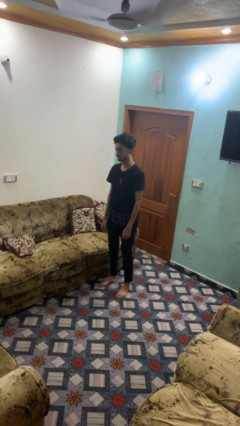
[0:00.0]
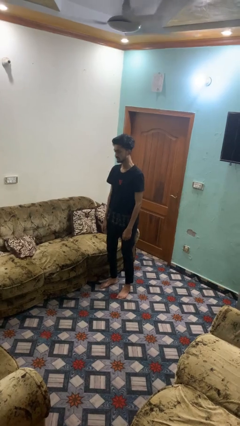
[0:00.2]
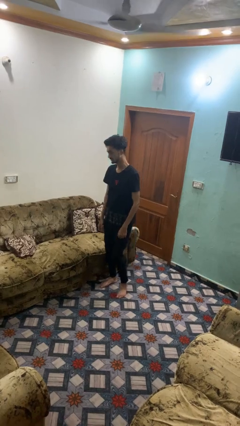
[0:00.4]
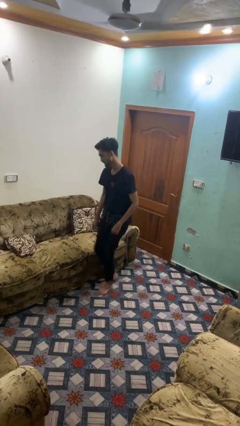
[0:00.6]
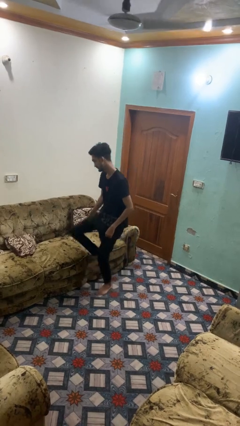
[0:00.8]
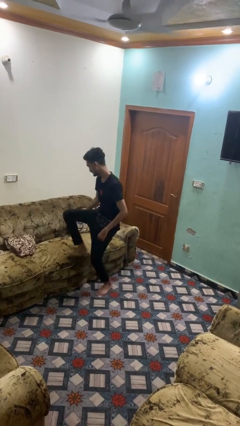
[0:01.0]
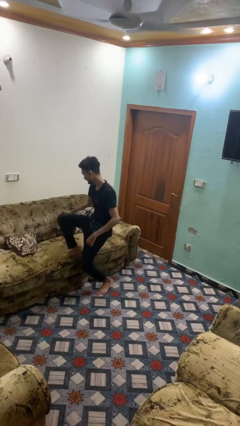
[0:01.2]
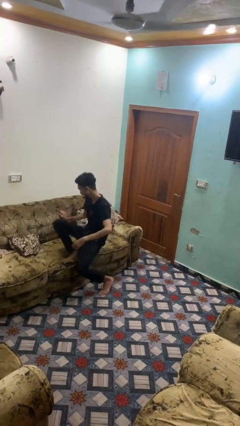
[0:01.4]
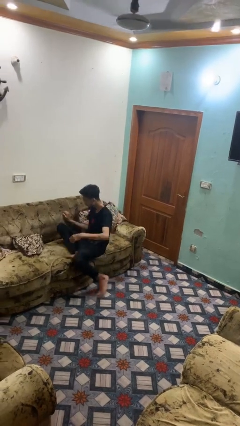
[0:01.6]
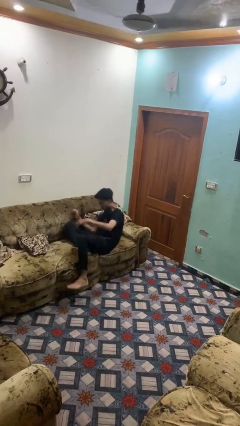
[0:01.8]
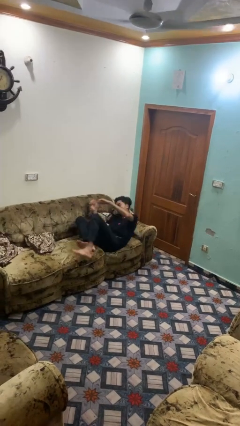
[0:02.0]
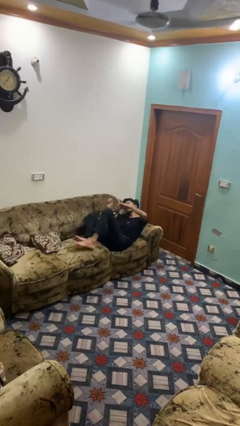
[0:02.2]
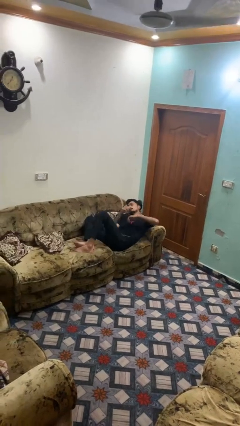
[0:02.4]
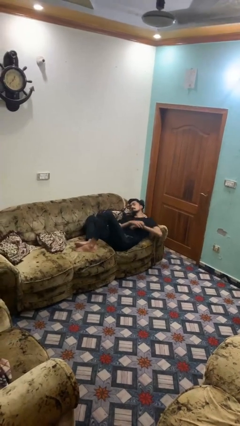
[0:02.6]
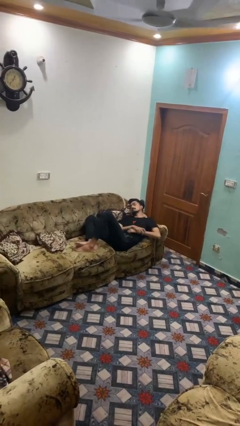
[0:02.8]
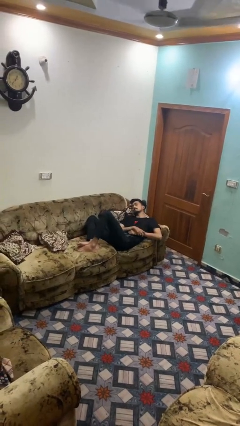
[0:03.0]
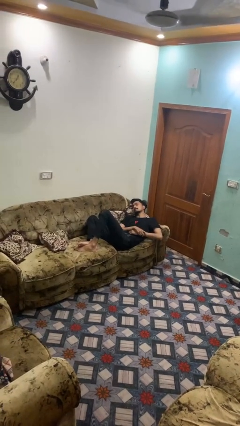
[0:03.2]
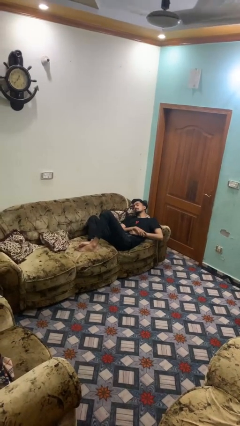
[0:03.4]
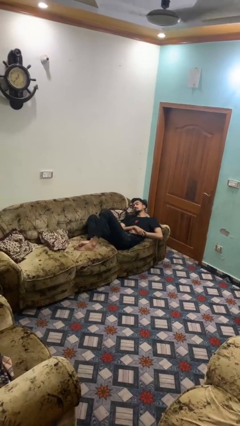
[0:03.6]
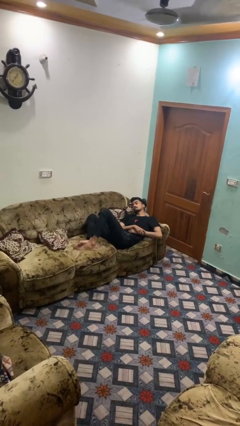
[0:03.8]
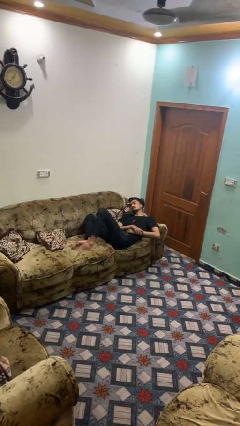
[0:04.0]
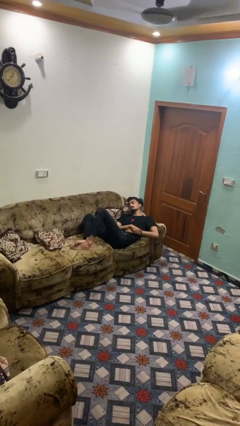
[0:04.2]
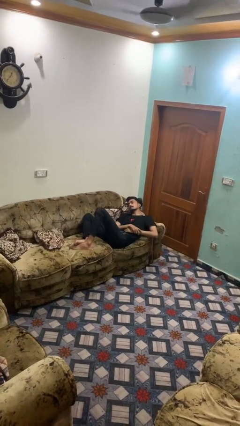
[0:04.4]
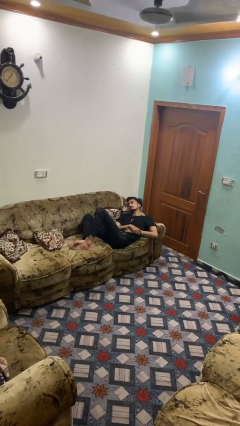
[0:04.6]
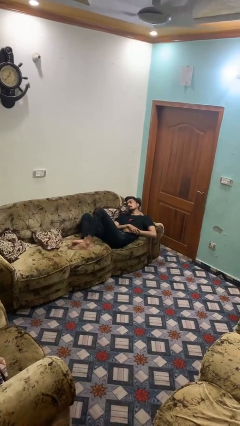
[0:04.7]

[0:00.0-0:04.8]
person lies down on couch

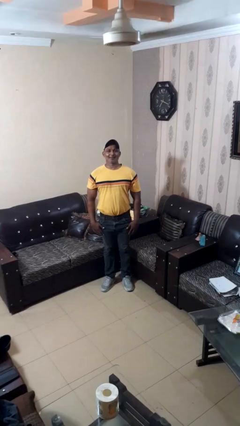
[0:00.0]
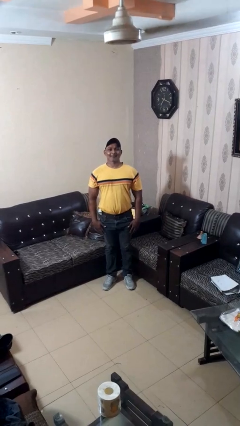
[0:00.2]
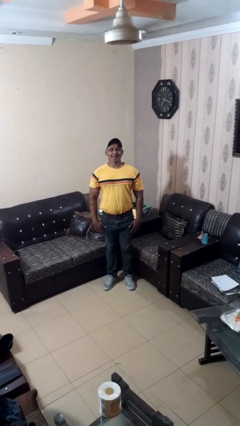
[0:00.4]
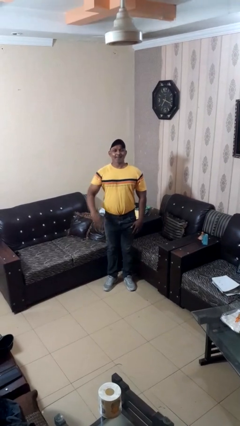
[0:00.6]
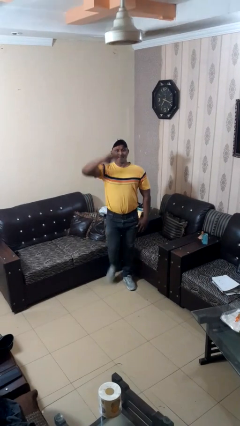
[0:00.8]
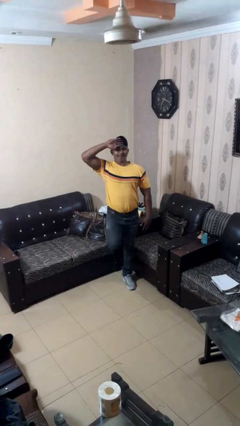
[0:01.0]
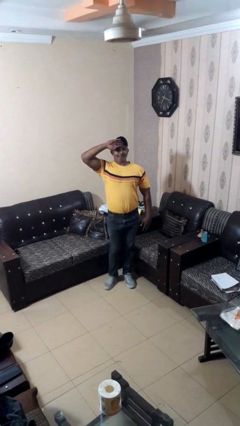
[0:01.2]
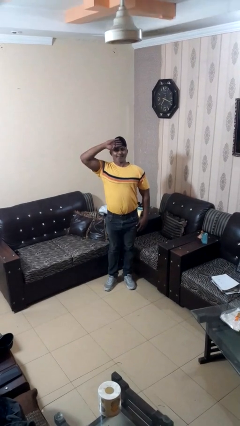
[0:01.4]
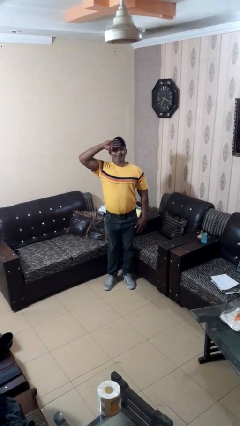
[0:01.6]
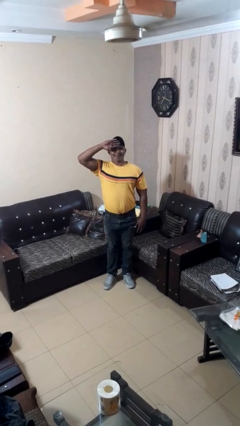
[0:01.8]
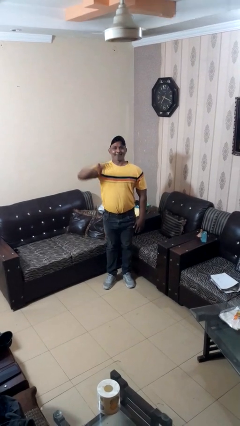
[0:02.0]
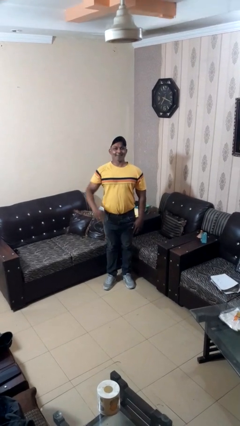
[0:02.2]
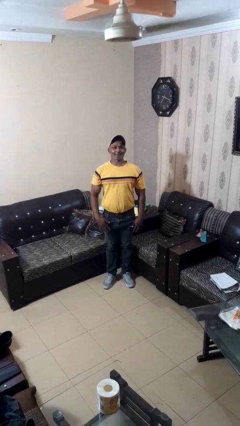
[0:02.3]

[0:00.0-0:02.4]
person salutes

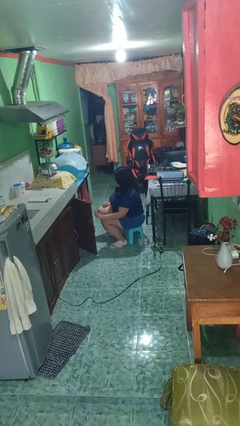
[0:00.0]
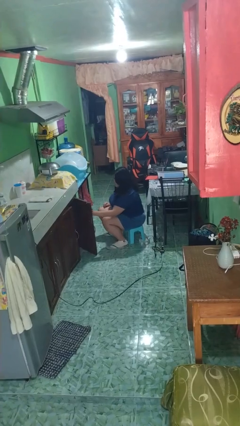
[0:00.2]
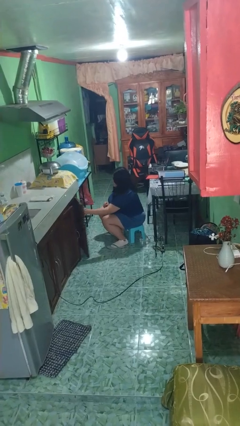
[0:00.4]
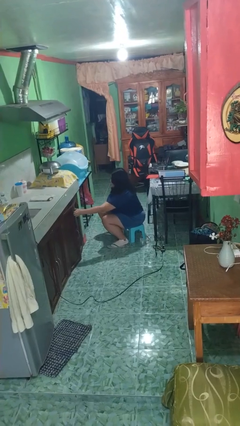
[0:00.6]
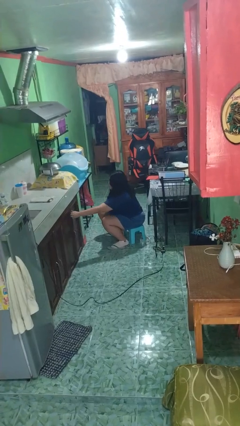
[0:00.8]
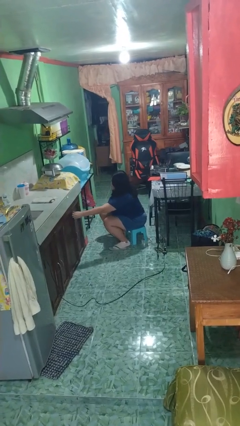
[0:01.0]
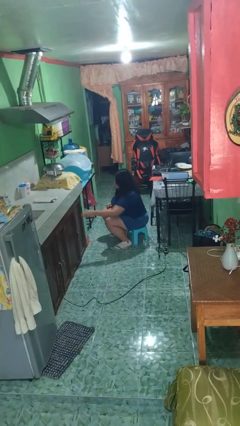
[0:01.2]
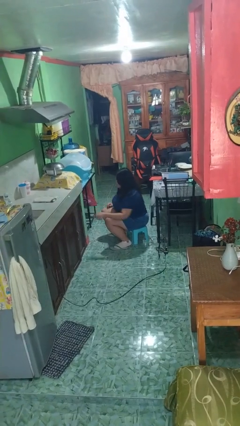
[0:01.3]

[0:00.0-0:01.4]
person closes cabinet

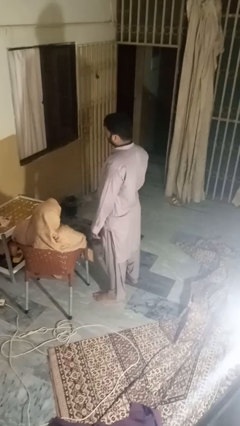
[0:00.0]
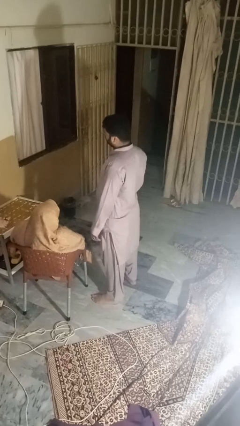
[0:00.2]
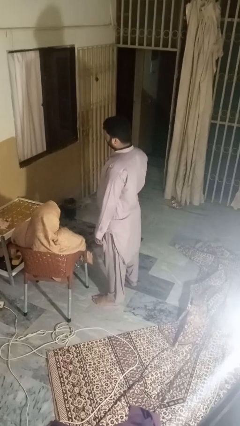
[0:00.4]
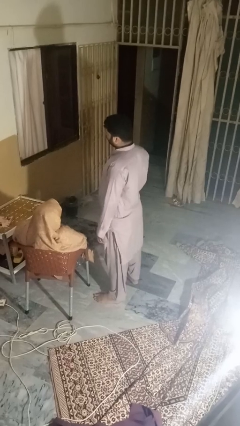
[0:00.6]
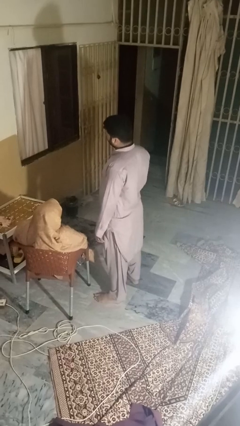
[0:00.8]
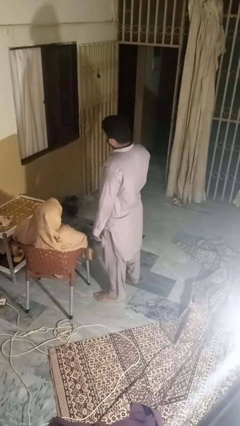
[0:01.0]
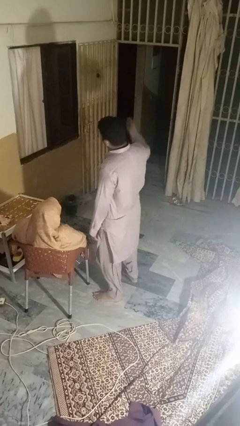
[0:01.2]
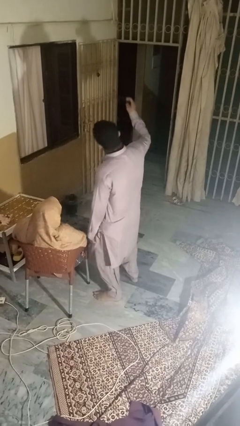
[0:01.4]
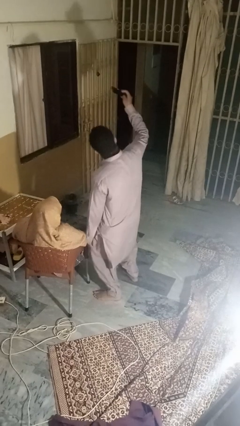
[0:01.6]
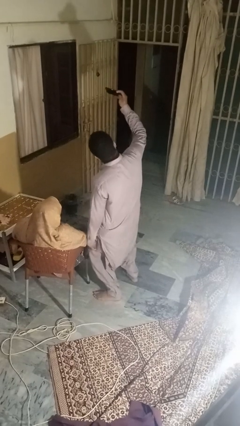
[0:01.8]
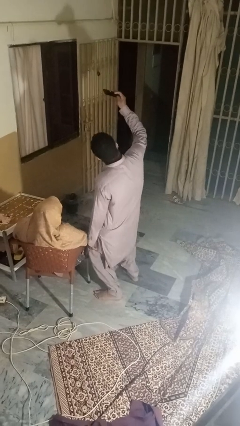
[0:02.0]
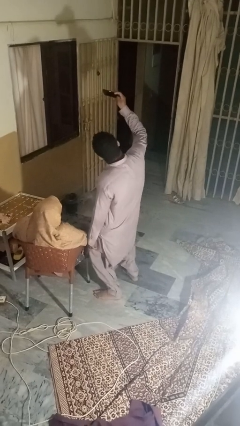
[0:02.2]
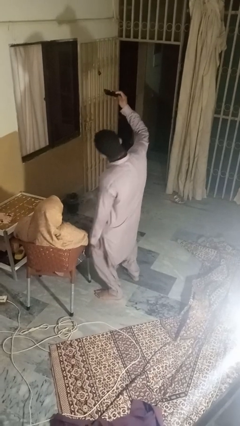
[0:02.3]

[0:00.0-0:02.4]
person takes selfie with person

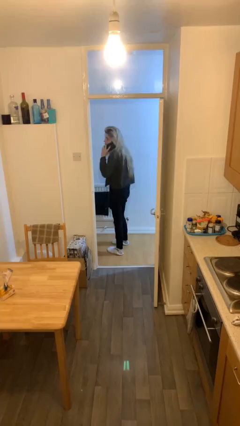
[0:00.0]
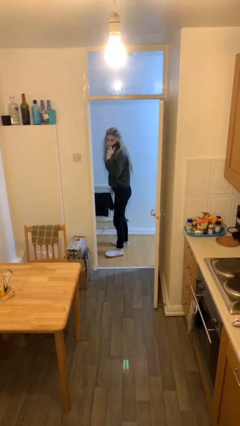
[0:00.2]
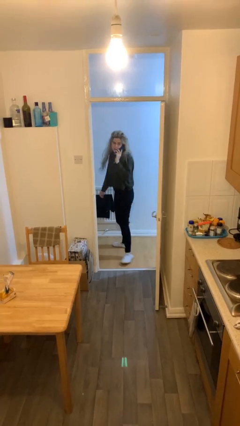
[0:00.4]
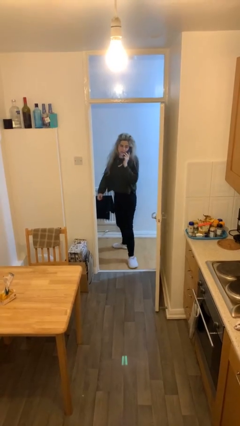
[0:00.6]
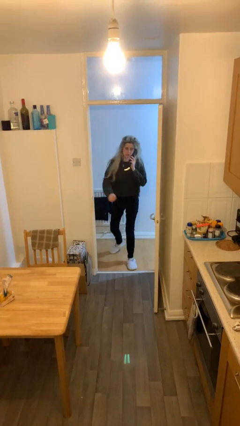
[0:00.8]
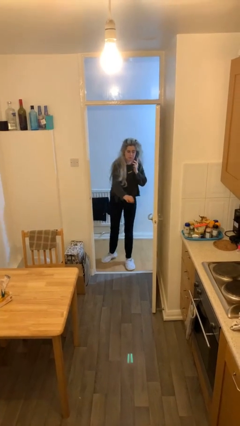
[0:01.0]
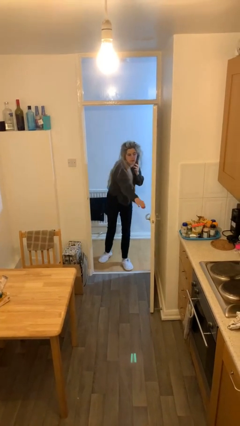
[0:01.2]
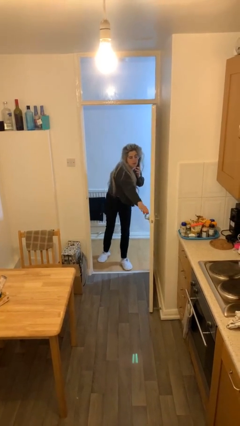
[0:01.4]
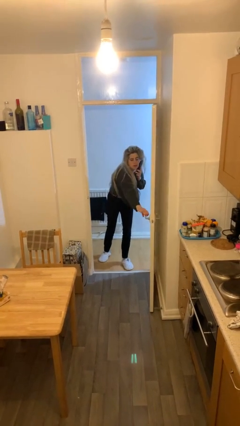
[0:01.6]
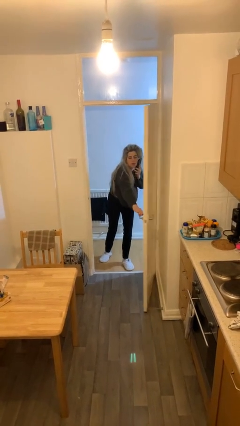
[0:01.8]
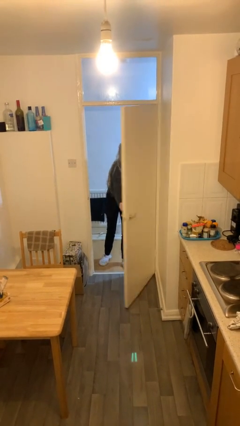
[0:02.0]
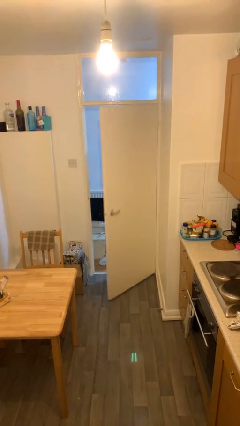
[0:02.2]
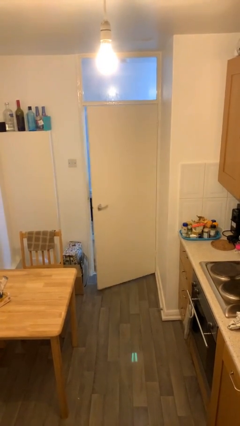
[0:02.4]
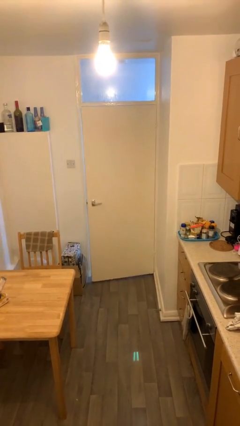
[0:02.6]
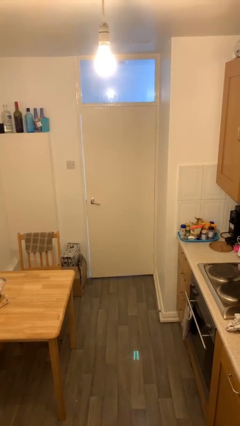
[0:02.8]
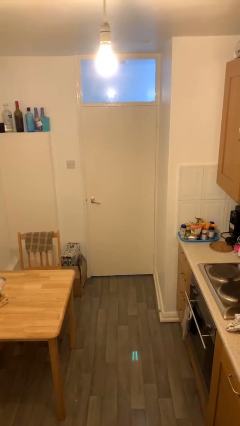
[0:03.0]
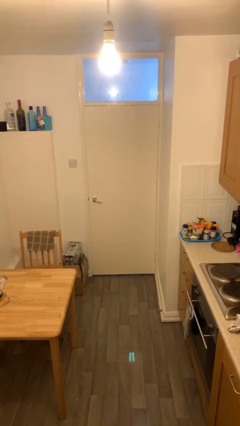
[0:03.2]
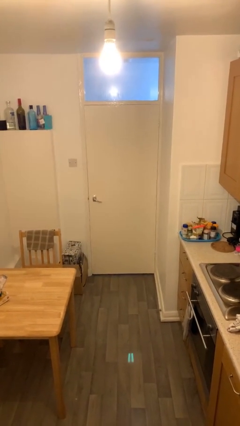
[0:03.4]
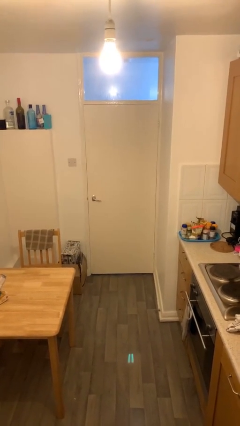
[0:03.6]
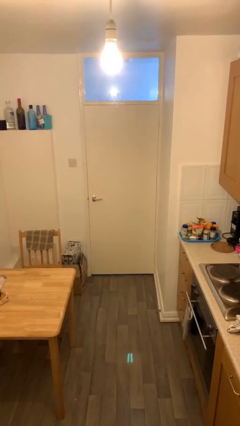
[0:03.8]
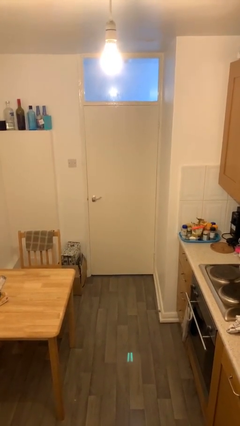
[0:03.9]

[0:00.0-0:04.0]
person closes facility door

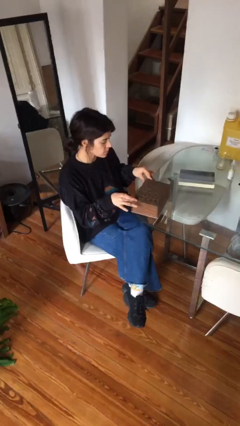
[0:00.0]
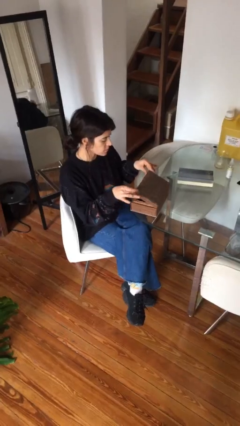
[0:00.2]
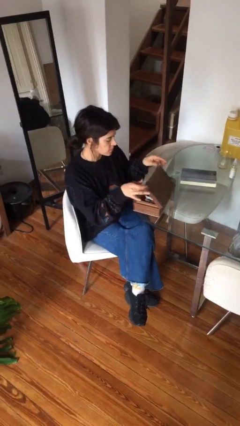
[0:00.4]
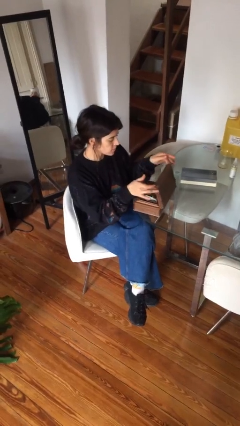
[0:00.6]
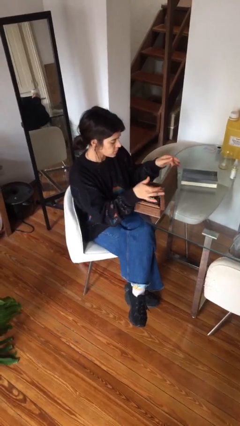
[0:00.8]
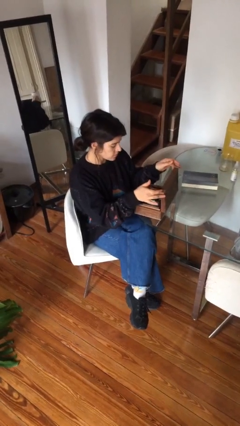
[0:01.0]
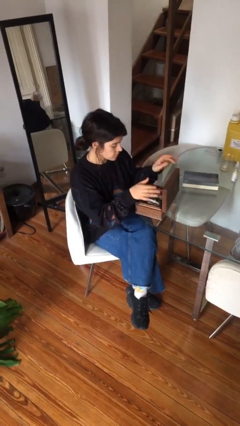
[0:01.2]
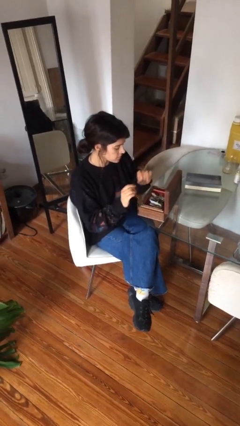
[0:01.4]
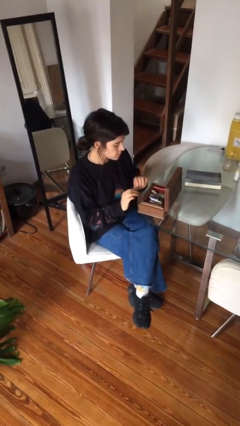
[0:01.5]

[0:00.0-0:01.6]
person opens jewelry box

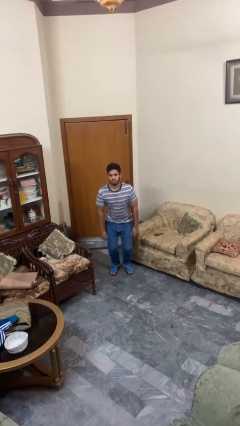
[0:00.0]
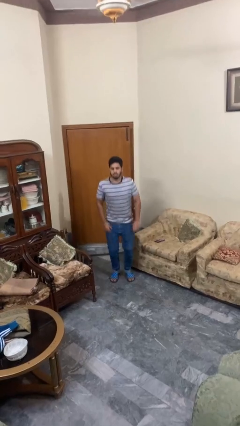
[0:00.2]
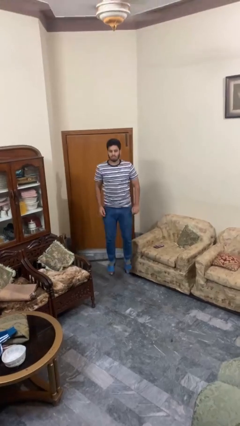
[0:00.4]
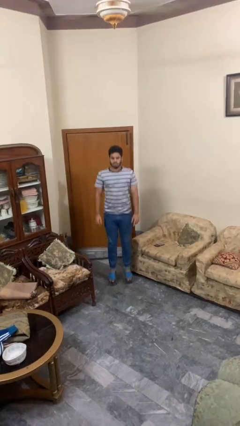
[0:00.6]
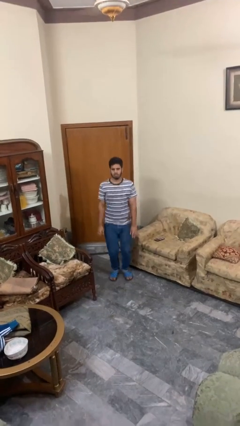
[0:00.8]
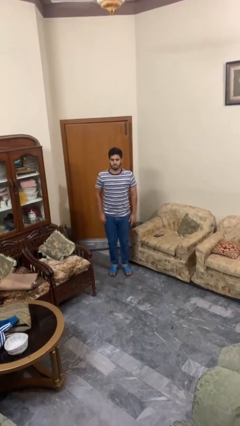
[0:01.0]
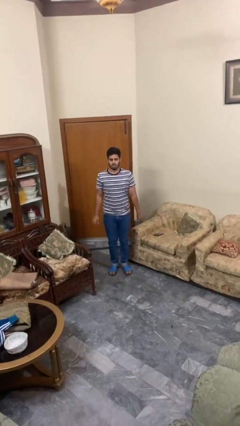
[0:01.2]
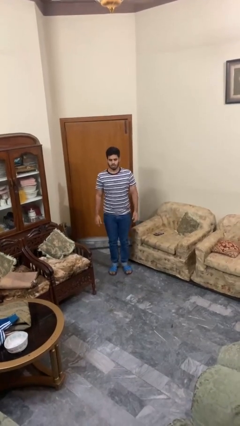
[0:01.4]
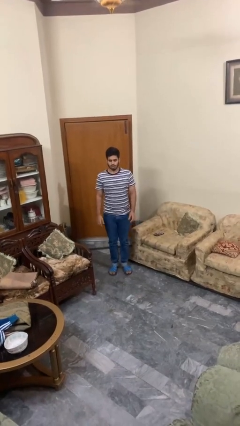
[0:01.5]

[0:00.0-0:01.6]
person jumps
